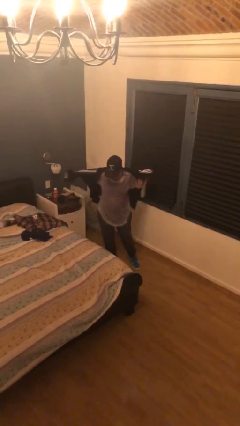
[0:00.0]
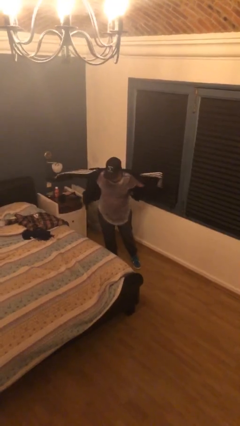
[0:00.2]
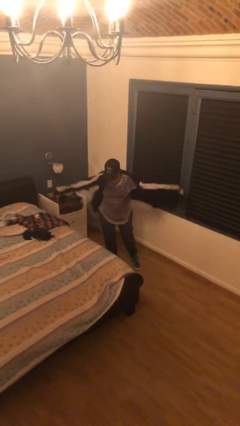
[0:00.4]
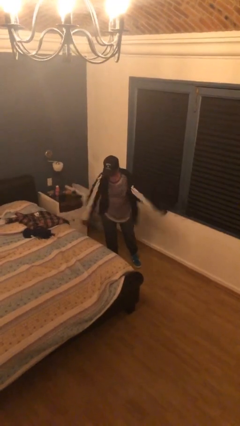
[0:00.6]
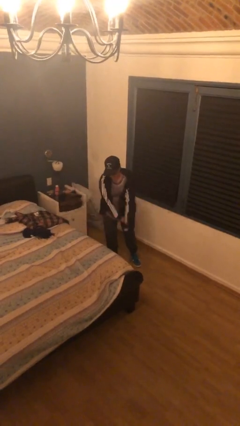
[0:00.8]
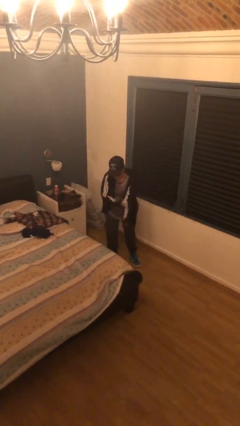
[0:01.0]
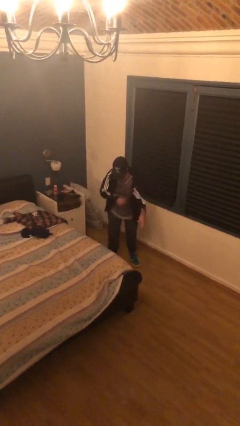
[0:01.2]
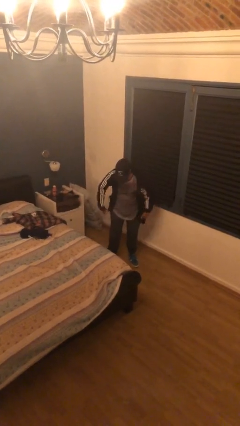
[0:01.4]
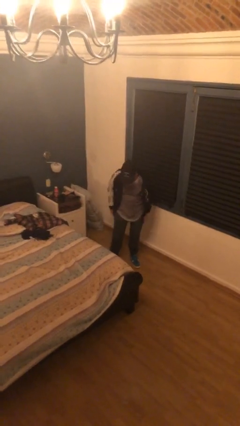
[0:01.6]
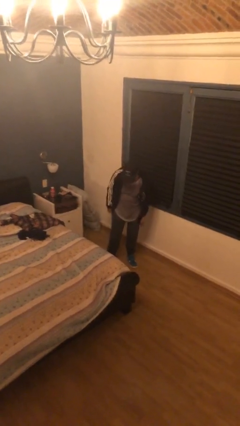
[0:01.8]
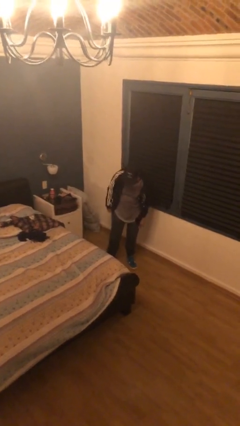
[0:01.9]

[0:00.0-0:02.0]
person puts on jacket

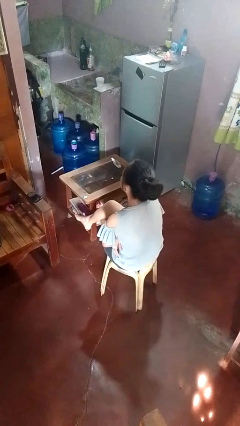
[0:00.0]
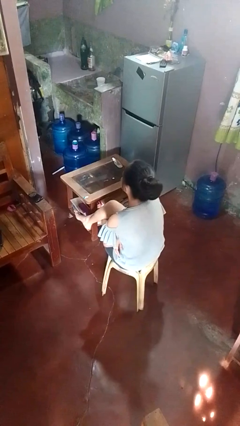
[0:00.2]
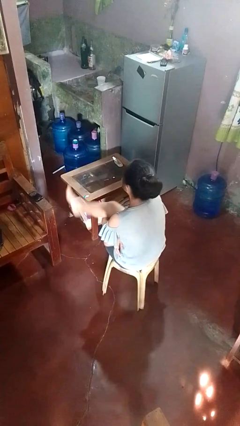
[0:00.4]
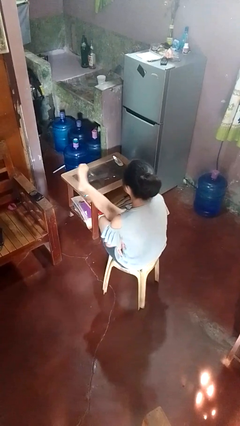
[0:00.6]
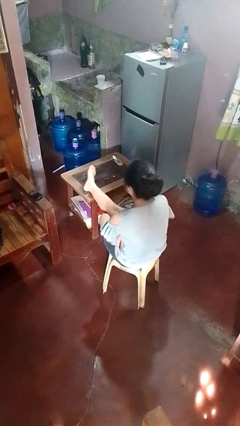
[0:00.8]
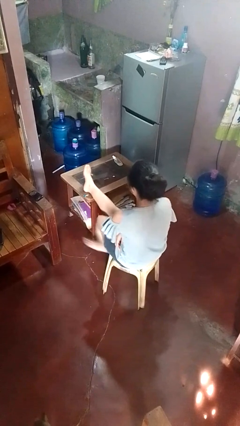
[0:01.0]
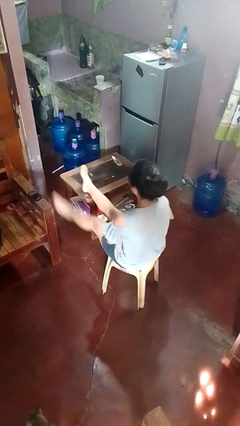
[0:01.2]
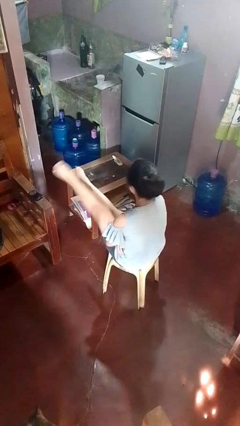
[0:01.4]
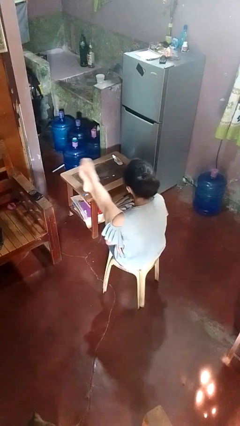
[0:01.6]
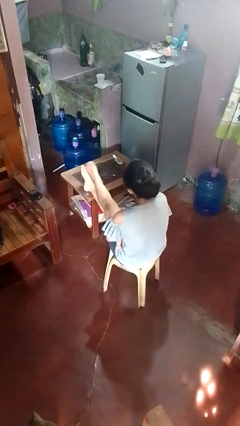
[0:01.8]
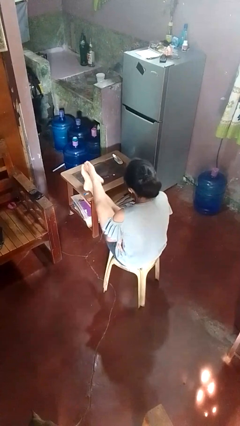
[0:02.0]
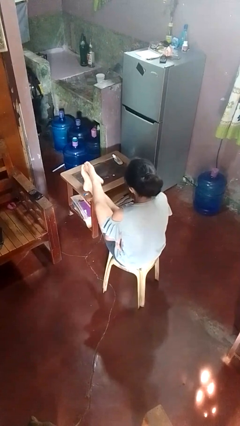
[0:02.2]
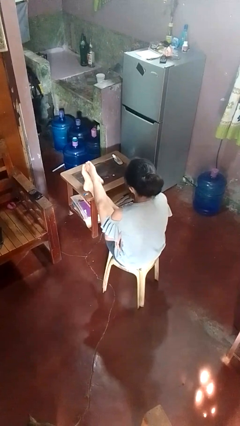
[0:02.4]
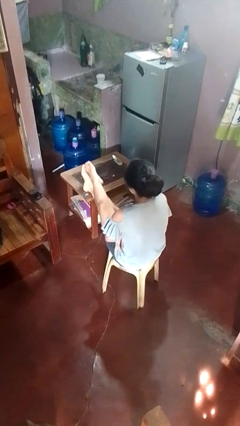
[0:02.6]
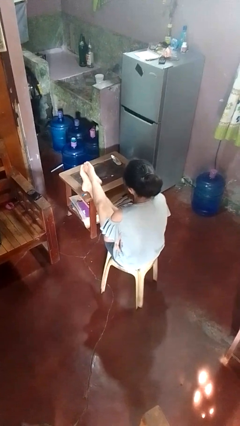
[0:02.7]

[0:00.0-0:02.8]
person puts feet up

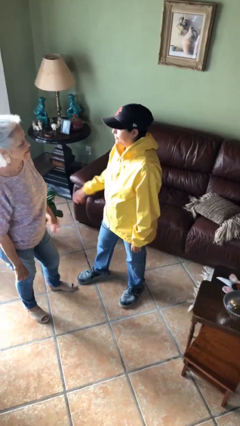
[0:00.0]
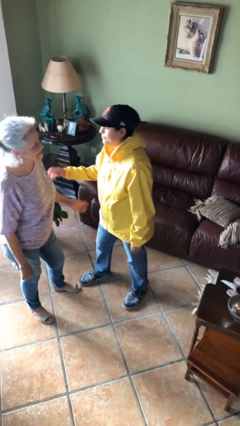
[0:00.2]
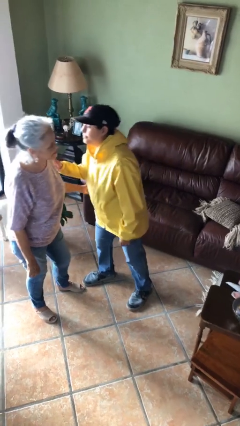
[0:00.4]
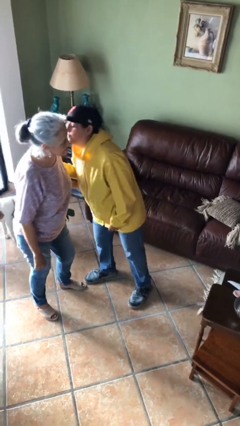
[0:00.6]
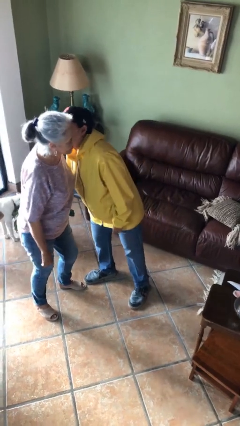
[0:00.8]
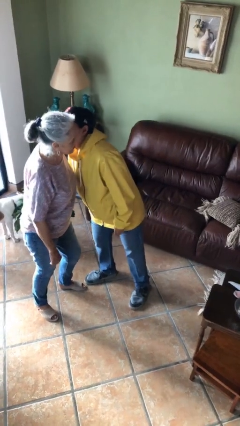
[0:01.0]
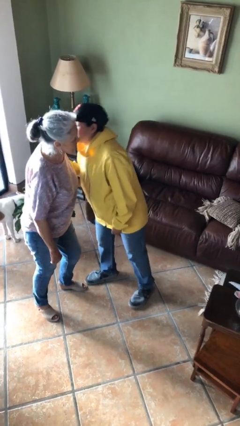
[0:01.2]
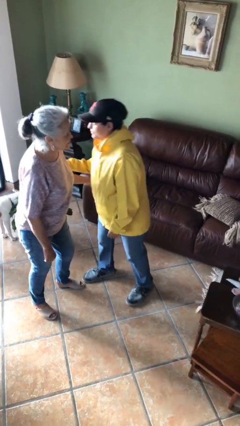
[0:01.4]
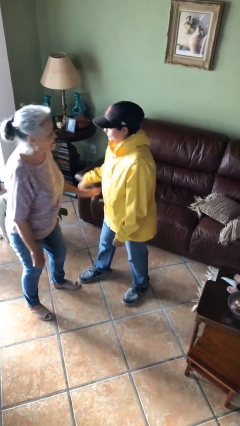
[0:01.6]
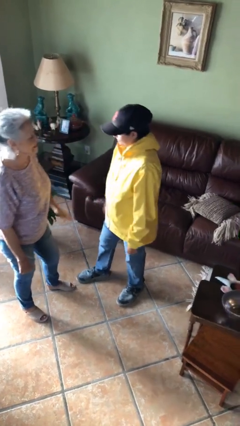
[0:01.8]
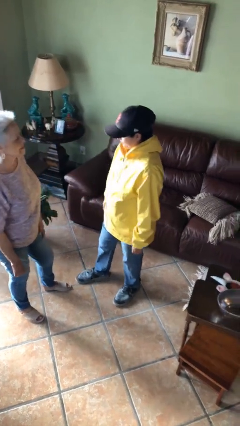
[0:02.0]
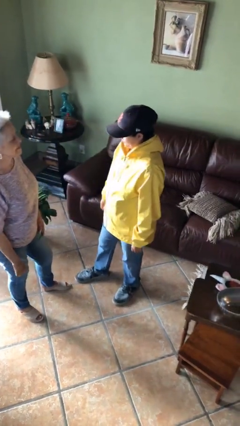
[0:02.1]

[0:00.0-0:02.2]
person kisses cheek of person

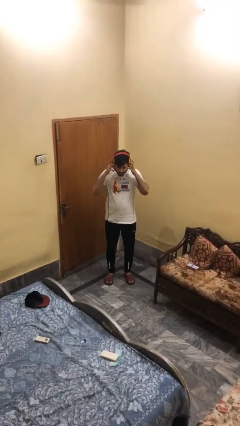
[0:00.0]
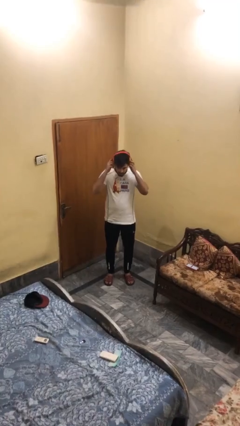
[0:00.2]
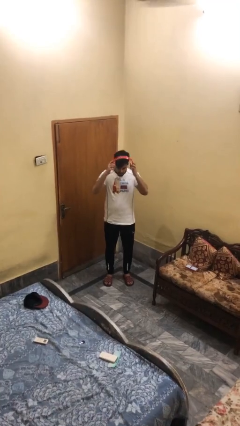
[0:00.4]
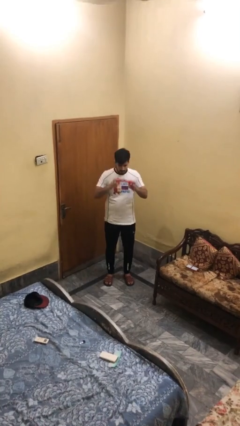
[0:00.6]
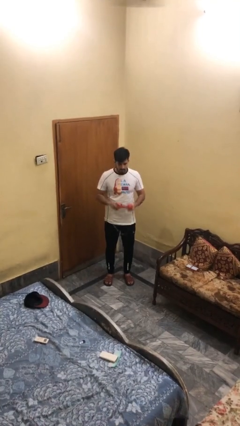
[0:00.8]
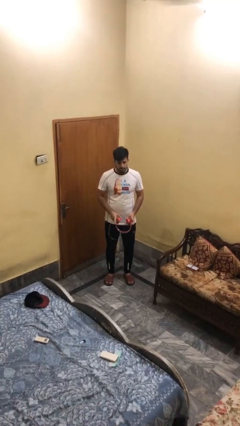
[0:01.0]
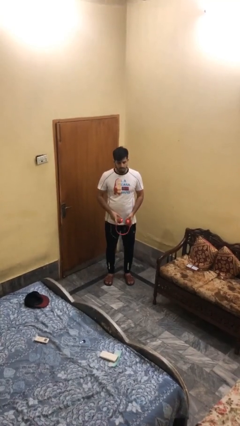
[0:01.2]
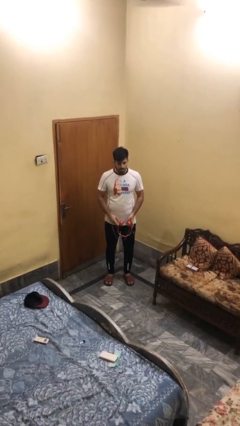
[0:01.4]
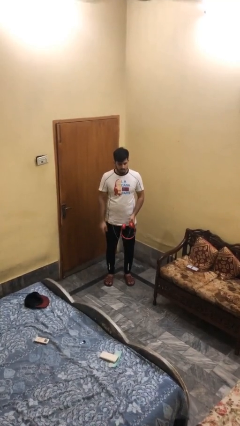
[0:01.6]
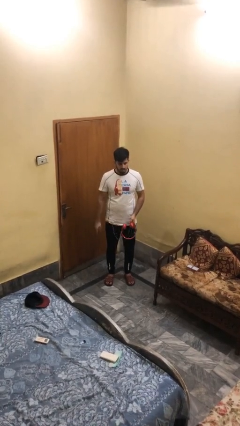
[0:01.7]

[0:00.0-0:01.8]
person takes off headphones

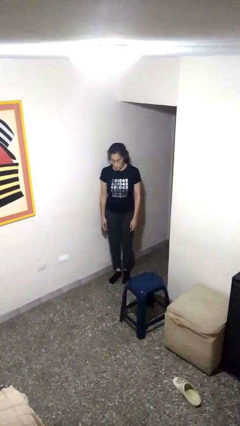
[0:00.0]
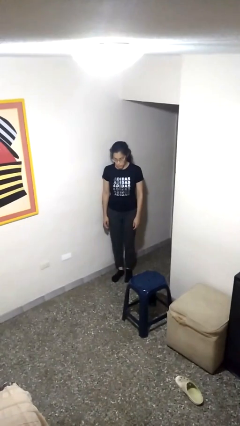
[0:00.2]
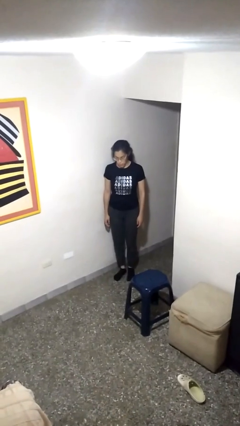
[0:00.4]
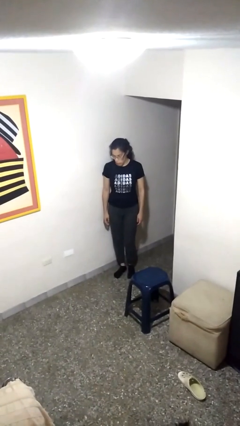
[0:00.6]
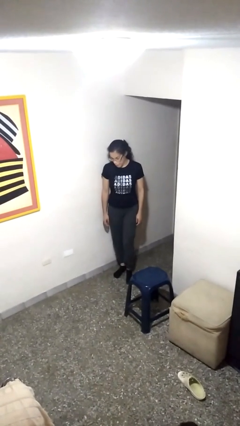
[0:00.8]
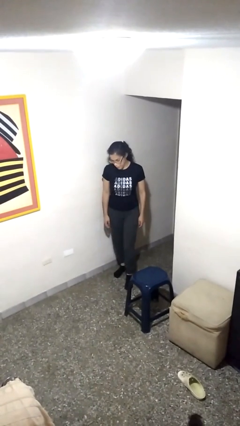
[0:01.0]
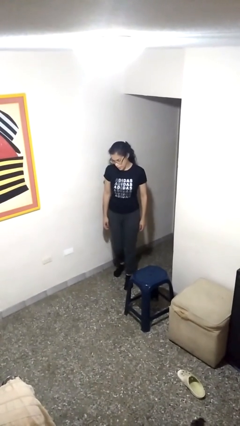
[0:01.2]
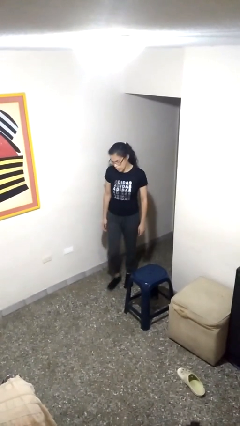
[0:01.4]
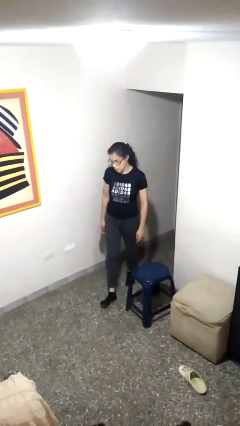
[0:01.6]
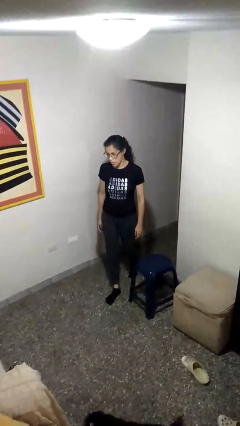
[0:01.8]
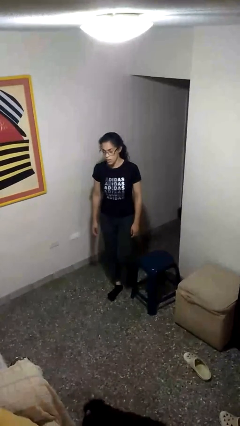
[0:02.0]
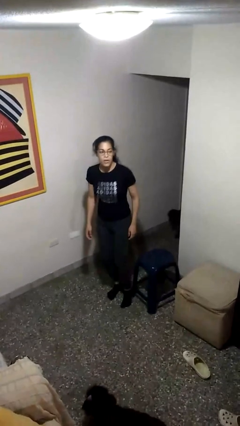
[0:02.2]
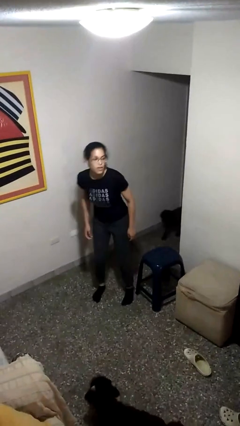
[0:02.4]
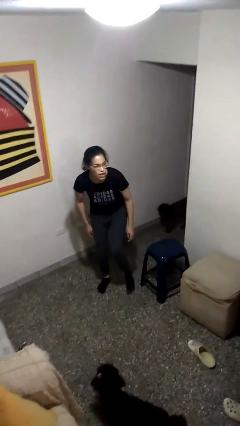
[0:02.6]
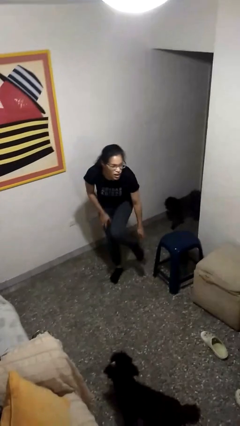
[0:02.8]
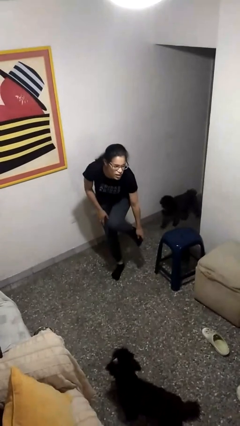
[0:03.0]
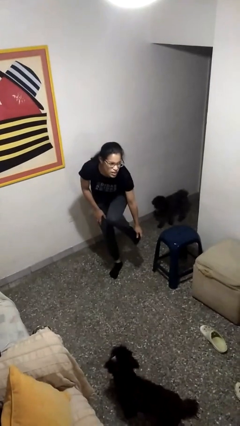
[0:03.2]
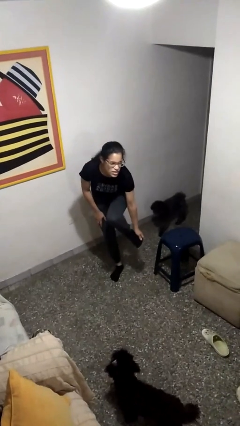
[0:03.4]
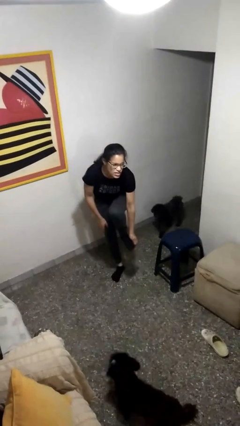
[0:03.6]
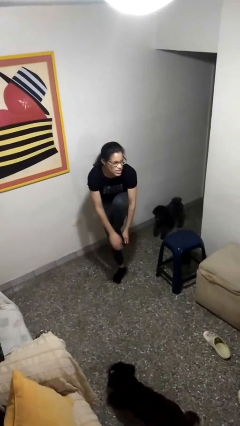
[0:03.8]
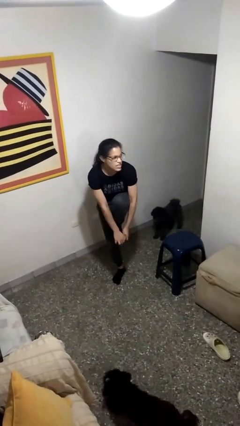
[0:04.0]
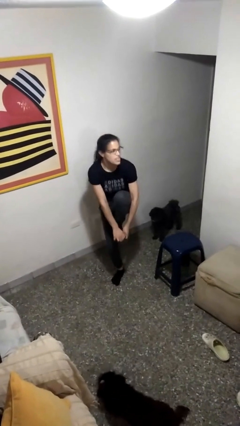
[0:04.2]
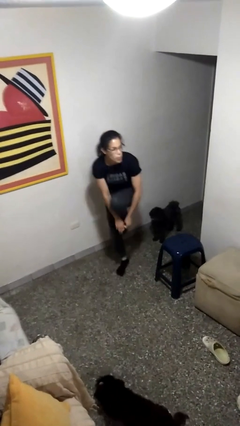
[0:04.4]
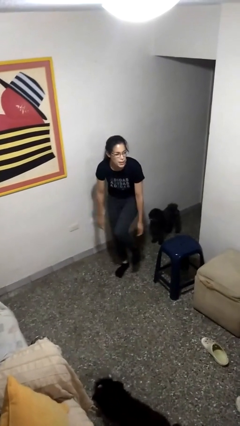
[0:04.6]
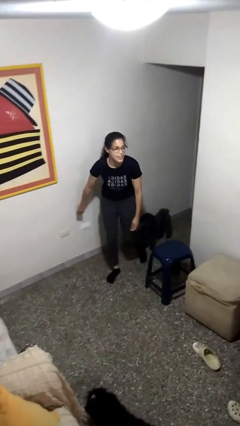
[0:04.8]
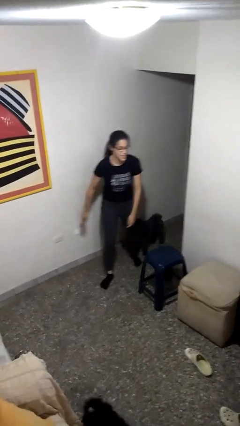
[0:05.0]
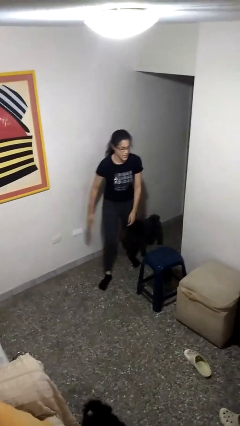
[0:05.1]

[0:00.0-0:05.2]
person stubs toe

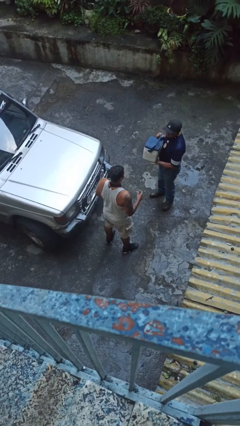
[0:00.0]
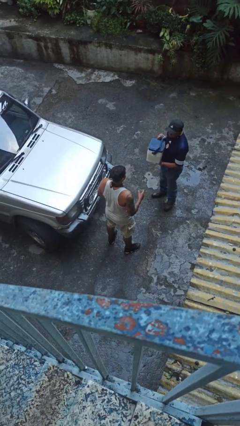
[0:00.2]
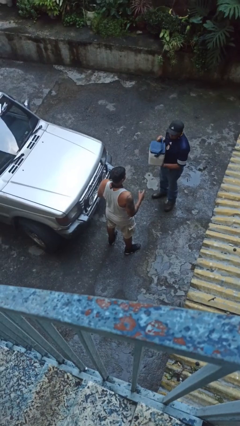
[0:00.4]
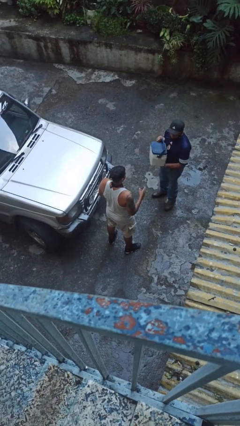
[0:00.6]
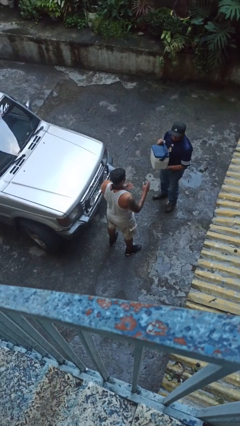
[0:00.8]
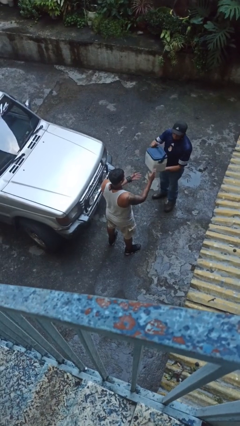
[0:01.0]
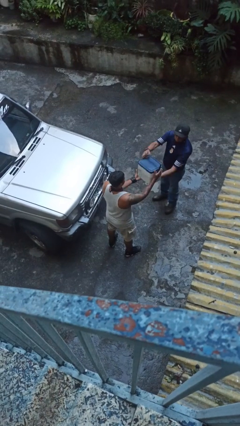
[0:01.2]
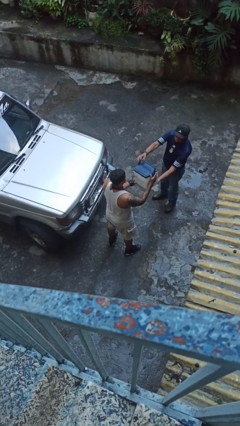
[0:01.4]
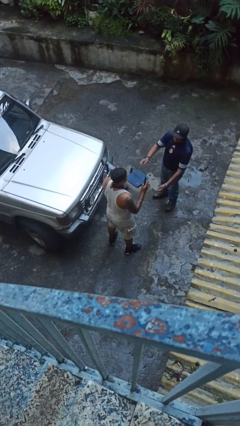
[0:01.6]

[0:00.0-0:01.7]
person transfers object to person

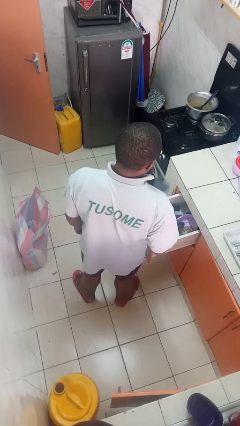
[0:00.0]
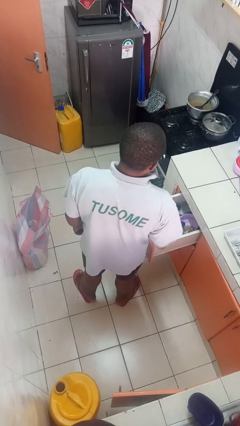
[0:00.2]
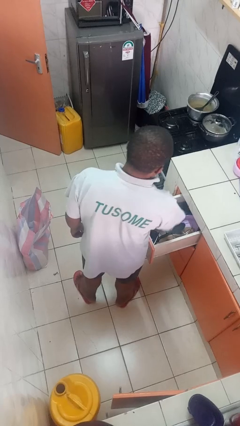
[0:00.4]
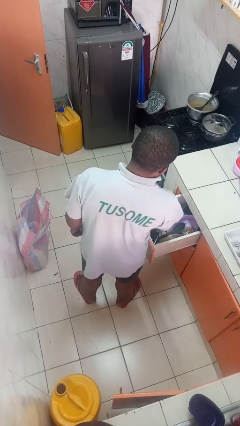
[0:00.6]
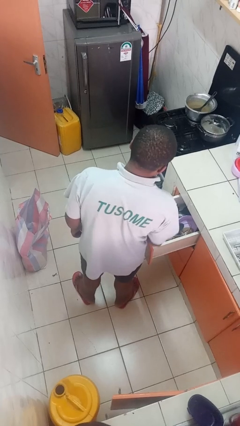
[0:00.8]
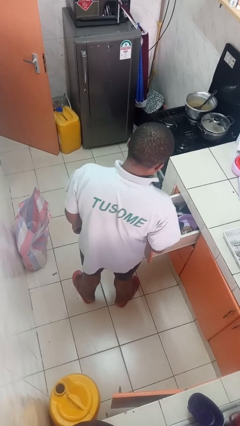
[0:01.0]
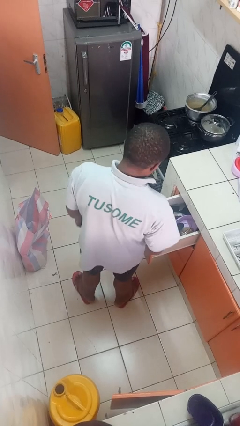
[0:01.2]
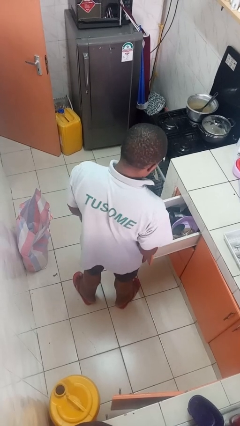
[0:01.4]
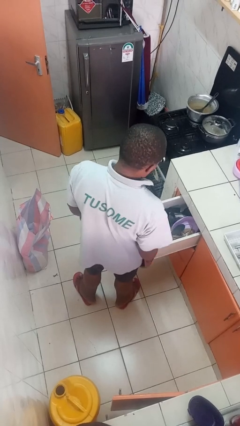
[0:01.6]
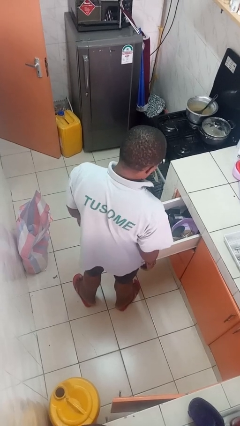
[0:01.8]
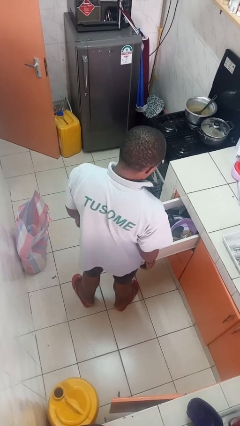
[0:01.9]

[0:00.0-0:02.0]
person puts object into kitchen drawer
